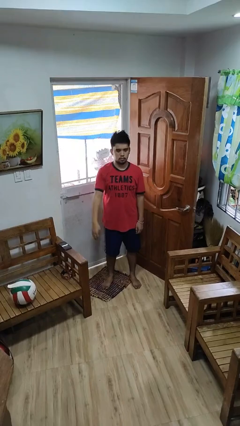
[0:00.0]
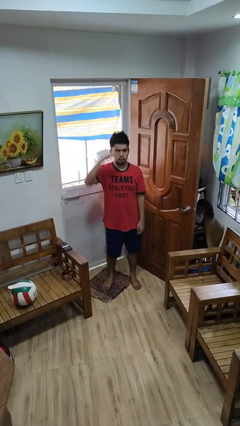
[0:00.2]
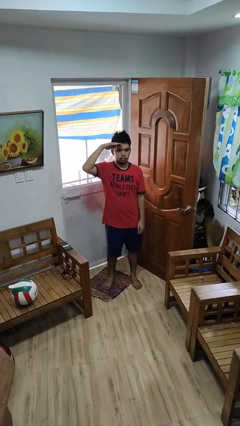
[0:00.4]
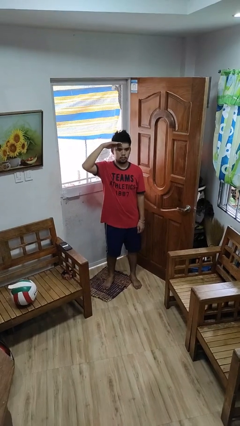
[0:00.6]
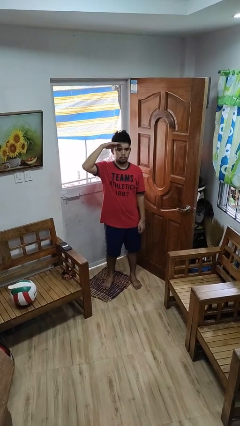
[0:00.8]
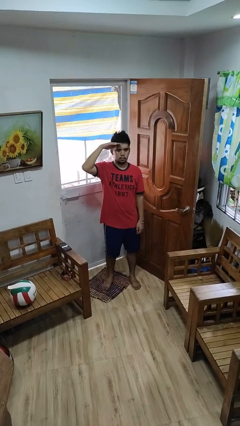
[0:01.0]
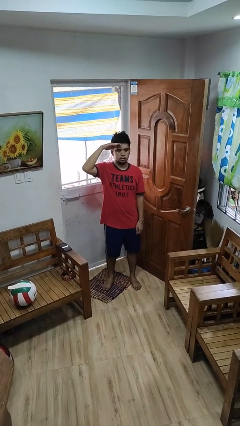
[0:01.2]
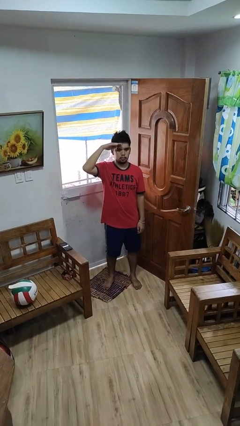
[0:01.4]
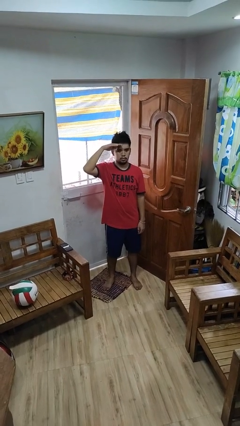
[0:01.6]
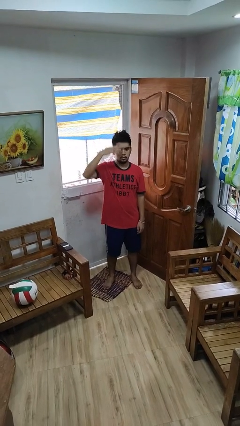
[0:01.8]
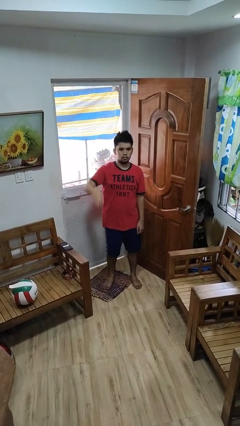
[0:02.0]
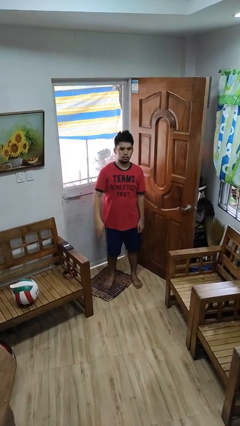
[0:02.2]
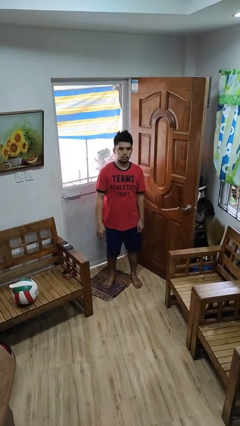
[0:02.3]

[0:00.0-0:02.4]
person salutes

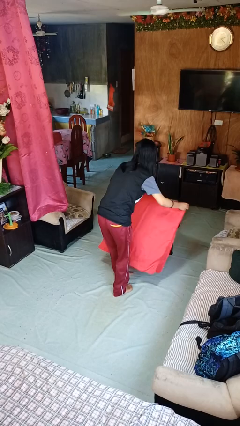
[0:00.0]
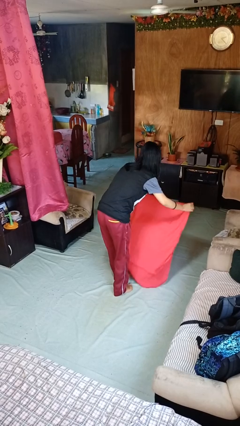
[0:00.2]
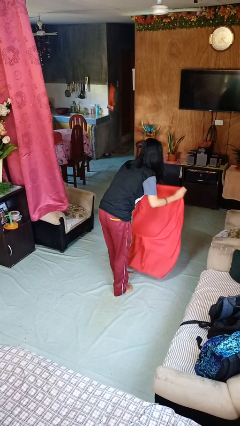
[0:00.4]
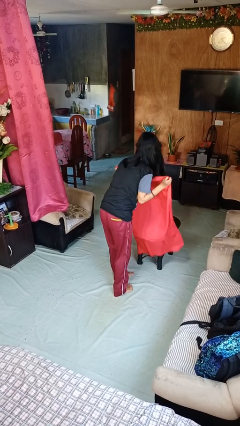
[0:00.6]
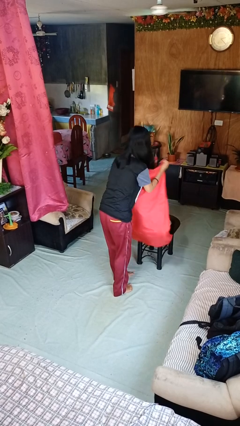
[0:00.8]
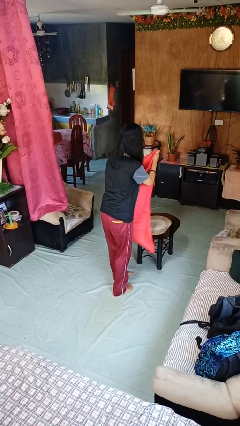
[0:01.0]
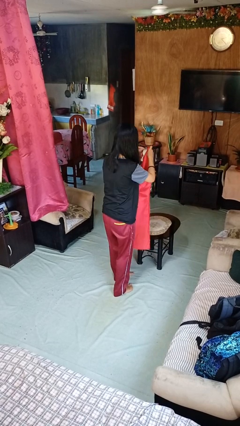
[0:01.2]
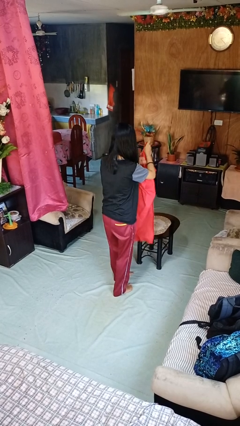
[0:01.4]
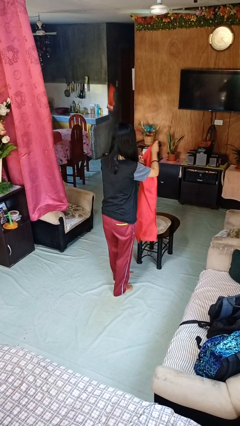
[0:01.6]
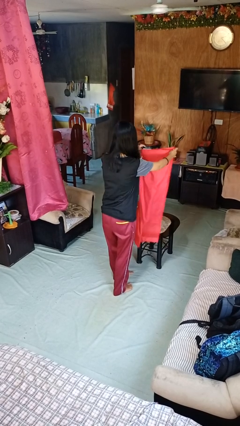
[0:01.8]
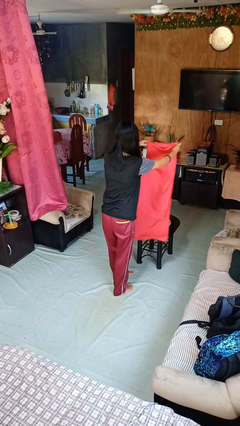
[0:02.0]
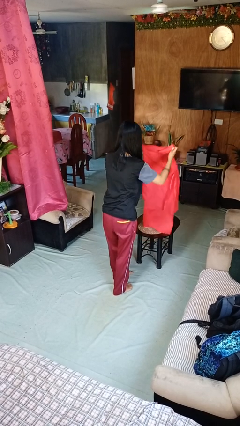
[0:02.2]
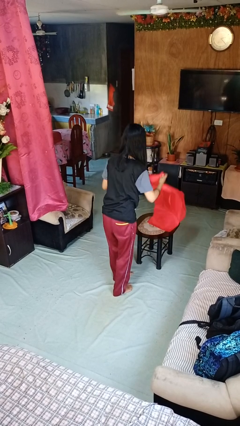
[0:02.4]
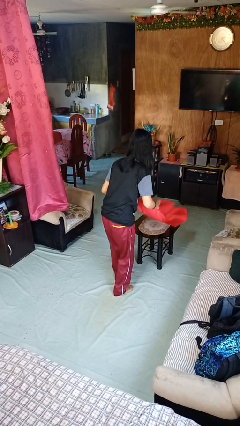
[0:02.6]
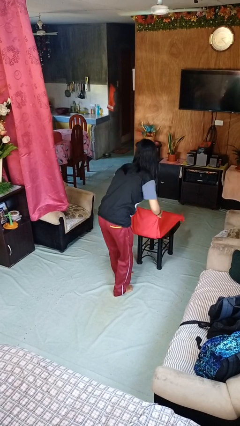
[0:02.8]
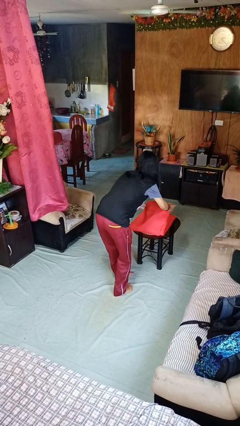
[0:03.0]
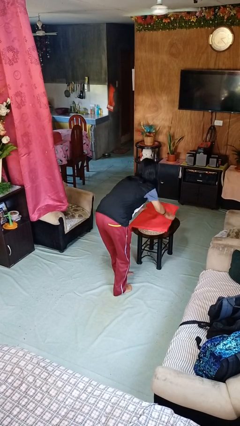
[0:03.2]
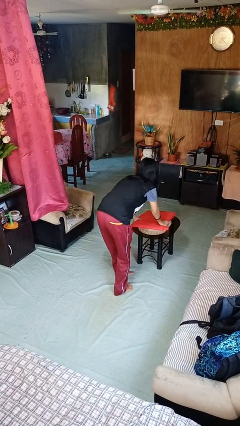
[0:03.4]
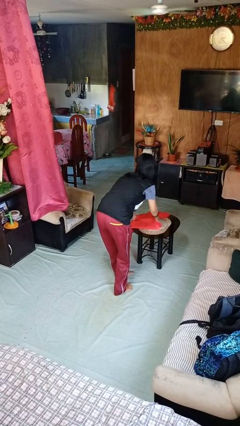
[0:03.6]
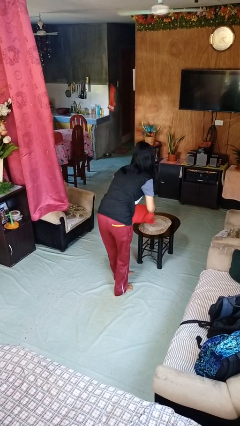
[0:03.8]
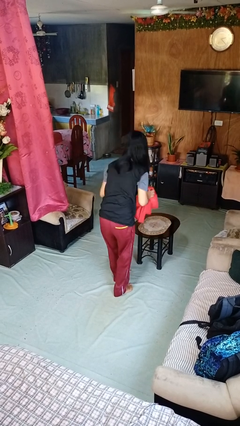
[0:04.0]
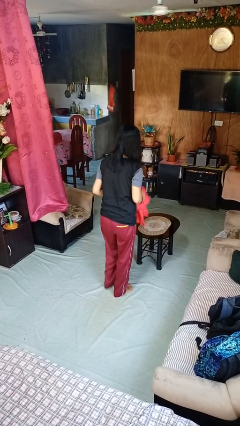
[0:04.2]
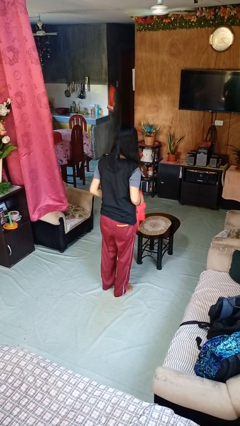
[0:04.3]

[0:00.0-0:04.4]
person folds tablecloth

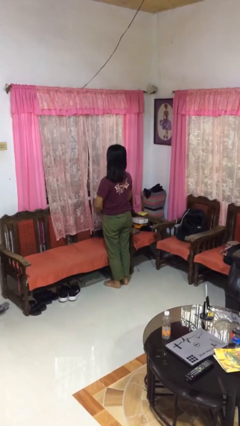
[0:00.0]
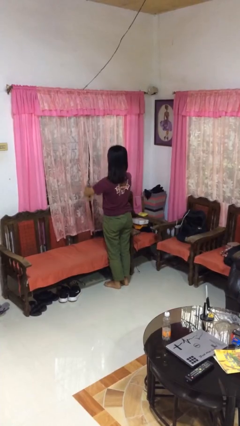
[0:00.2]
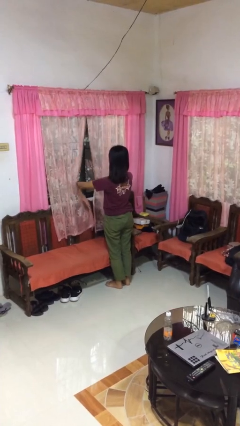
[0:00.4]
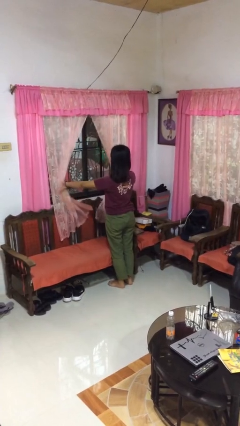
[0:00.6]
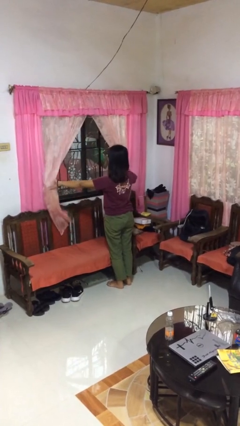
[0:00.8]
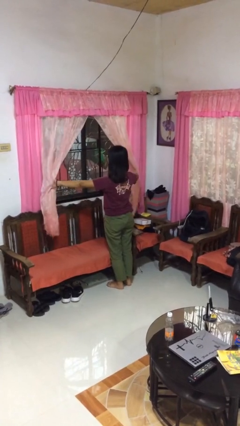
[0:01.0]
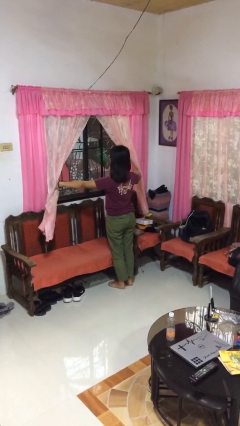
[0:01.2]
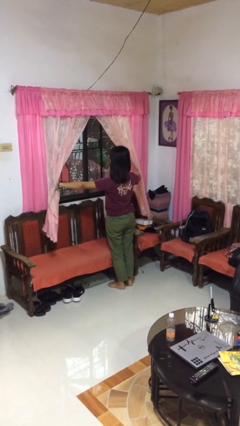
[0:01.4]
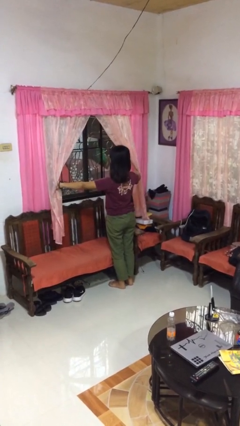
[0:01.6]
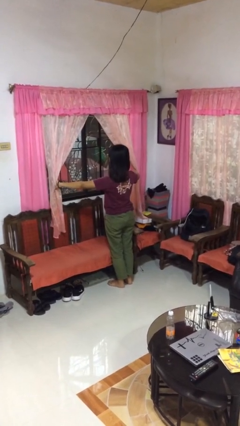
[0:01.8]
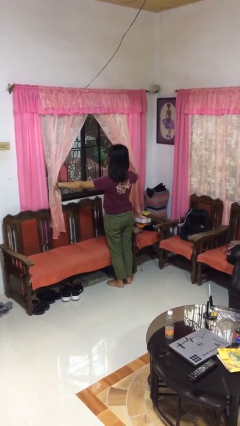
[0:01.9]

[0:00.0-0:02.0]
person opens curtains

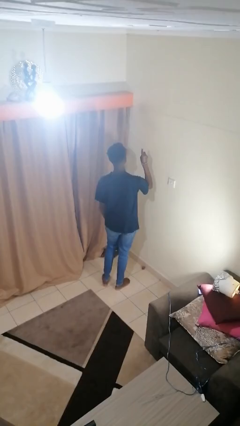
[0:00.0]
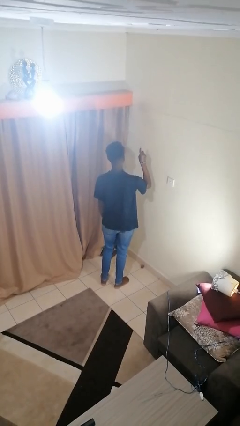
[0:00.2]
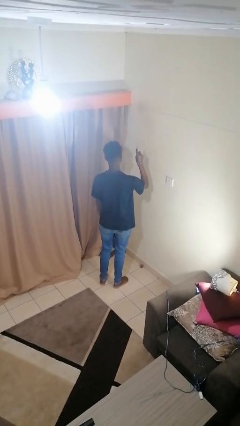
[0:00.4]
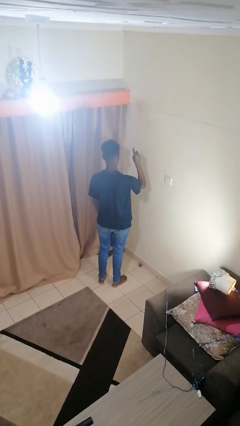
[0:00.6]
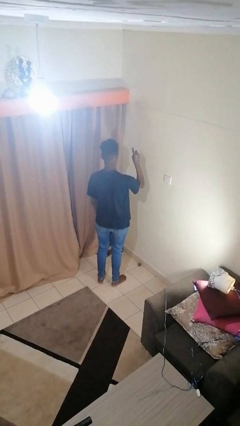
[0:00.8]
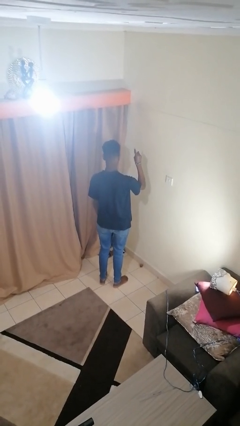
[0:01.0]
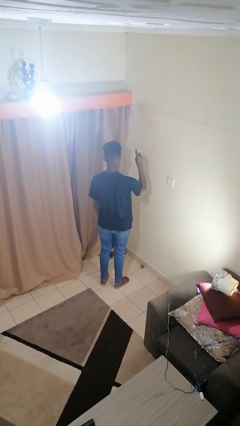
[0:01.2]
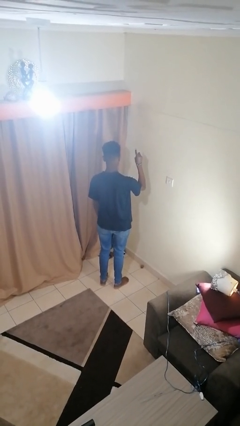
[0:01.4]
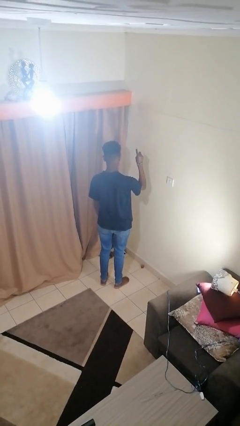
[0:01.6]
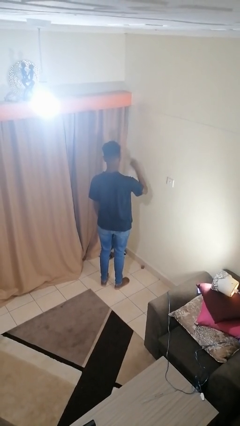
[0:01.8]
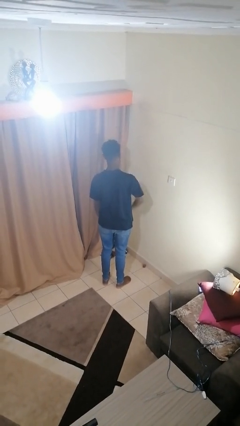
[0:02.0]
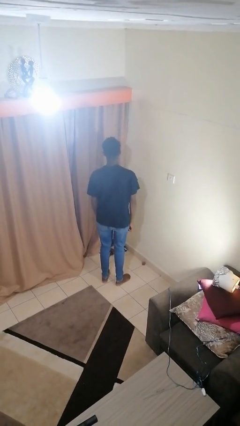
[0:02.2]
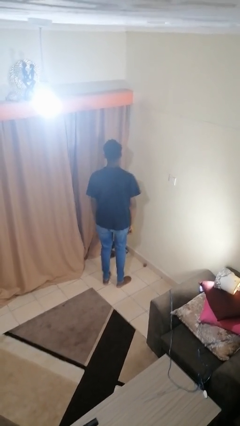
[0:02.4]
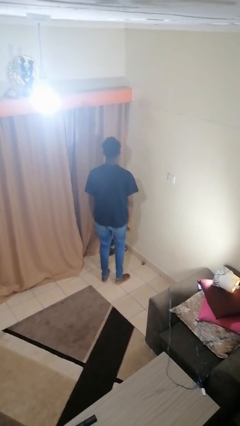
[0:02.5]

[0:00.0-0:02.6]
person gestures number one

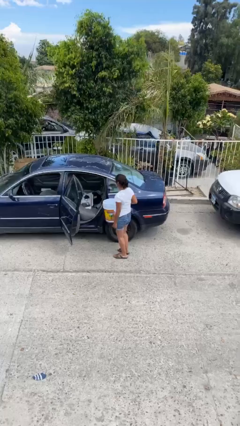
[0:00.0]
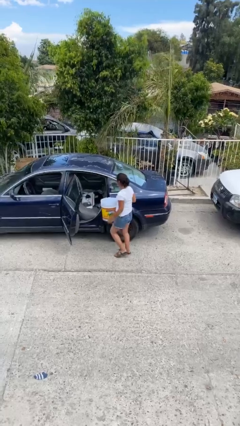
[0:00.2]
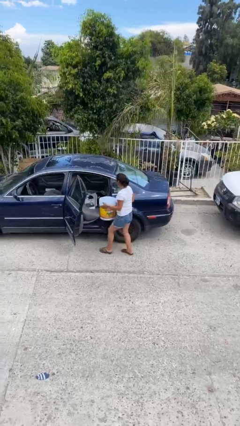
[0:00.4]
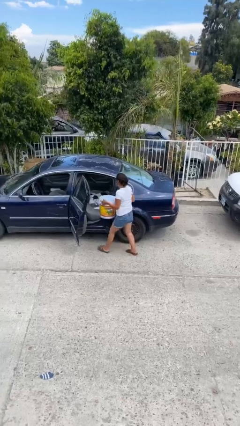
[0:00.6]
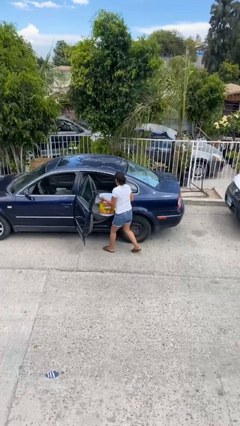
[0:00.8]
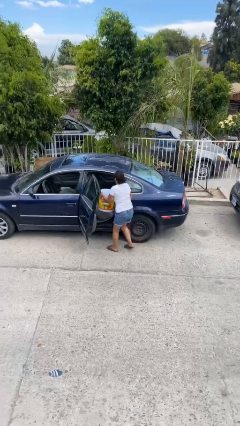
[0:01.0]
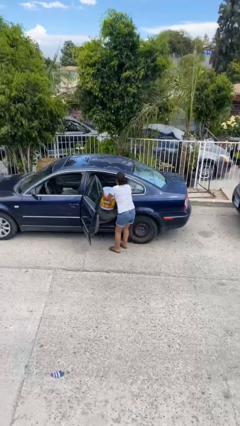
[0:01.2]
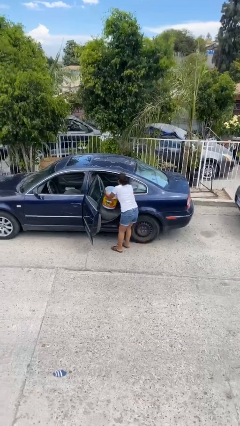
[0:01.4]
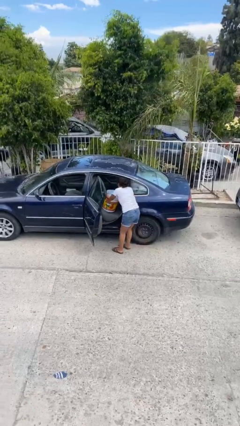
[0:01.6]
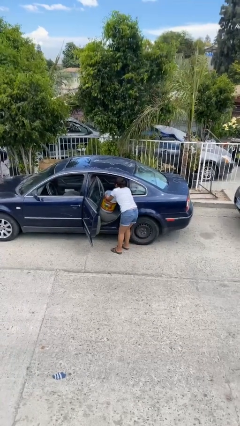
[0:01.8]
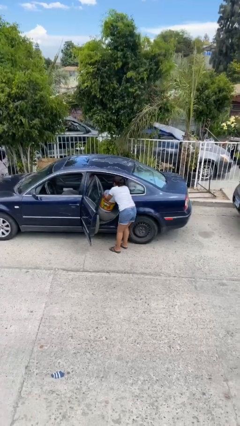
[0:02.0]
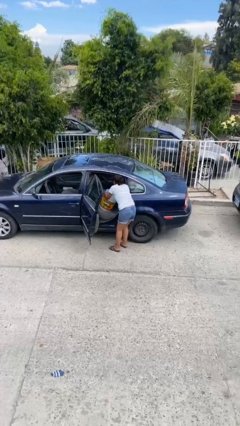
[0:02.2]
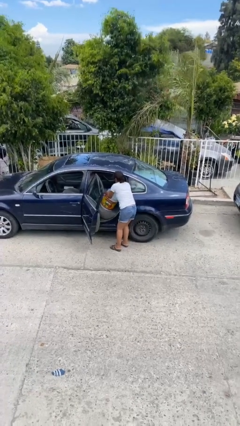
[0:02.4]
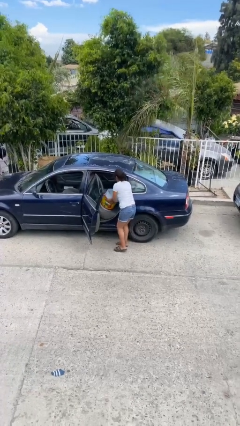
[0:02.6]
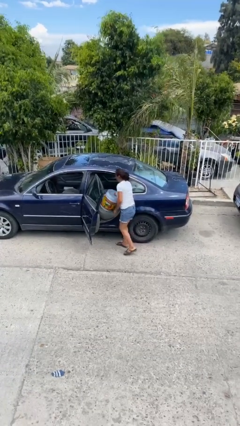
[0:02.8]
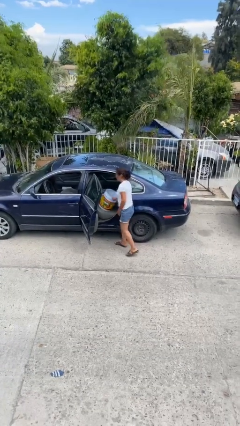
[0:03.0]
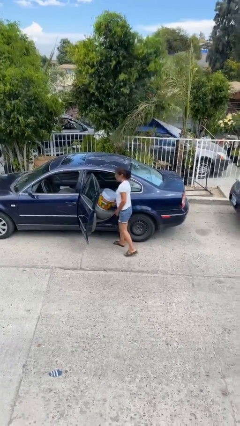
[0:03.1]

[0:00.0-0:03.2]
person loads car

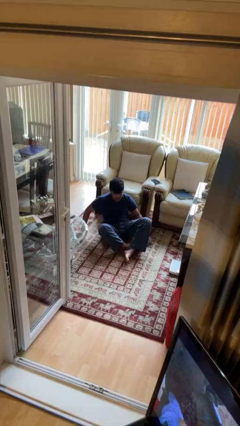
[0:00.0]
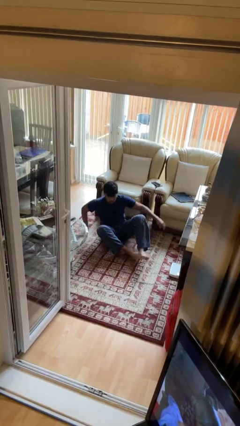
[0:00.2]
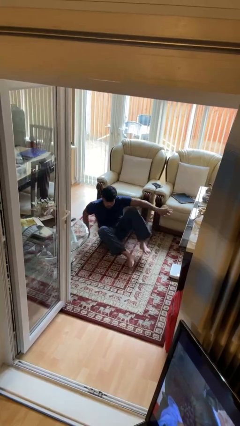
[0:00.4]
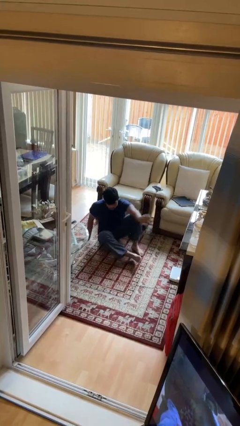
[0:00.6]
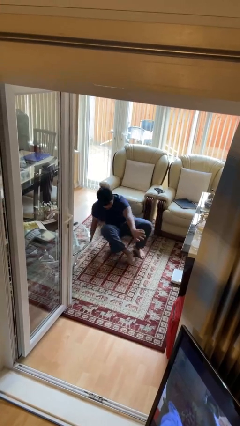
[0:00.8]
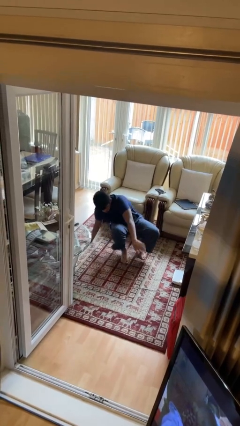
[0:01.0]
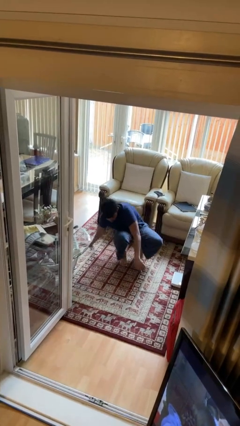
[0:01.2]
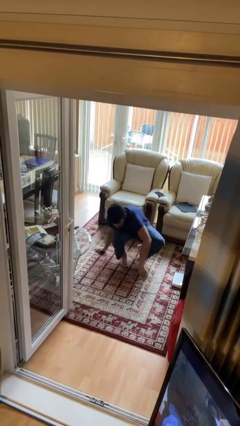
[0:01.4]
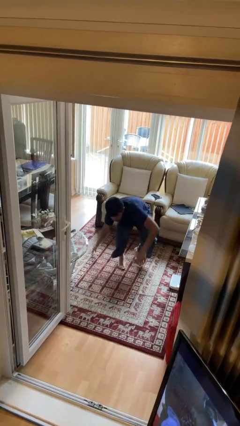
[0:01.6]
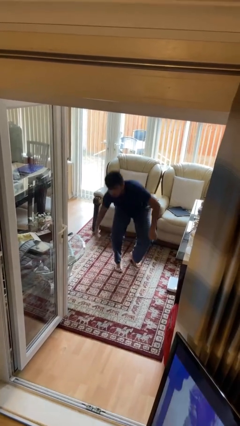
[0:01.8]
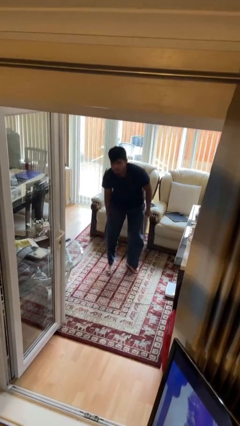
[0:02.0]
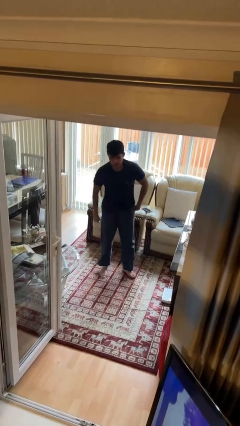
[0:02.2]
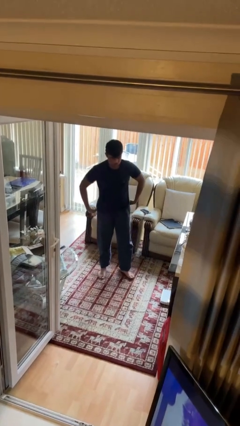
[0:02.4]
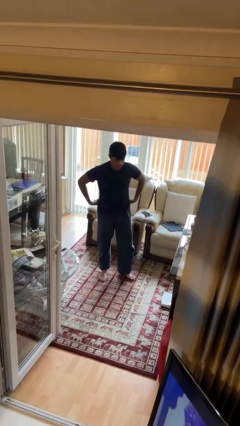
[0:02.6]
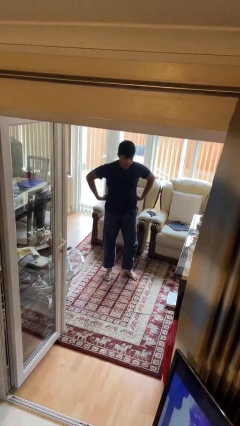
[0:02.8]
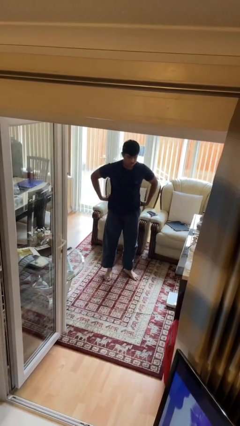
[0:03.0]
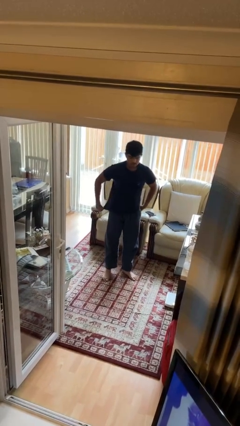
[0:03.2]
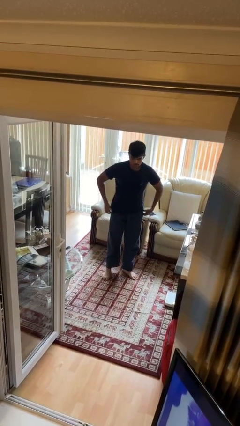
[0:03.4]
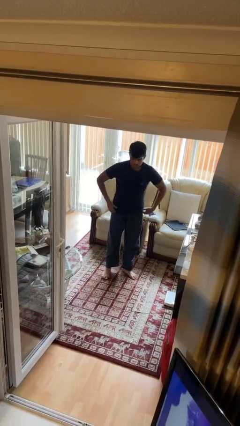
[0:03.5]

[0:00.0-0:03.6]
person stands up from floor
